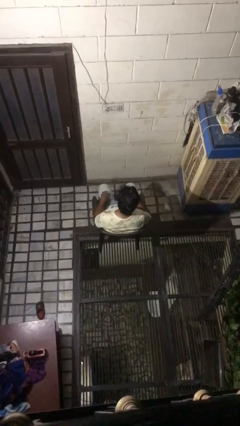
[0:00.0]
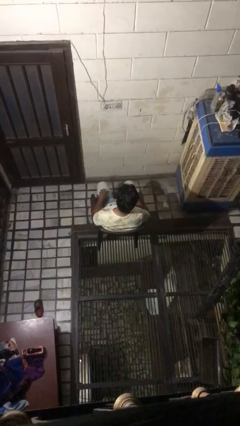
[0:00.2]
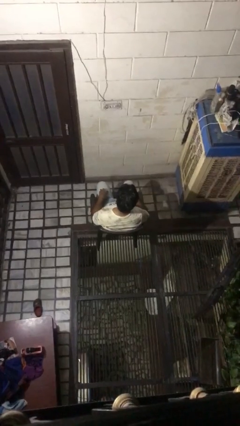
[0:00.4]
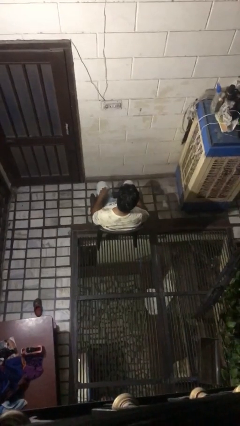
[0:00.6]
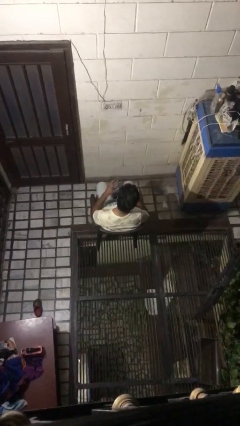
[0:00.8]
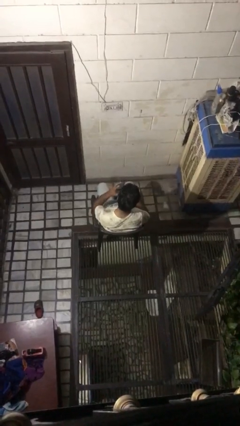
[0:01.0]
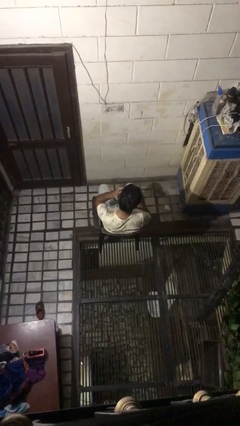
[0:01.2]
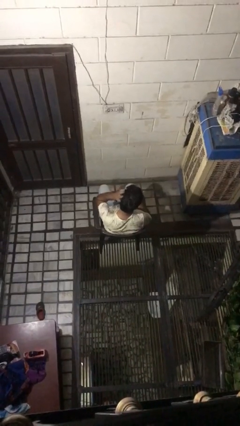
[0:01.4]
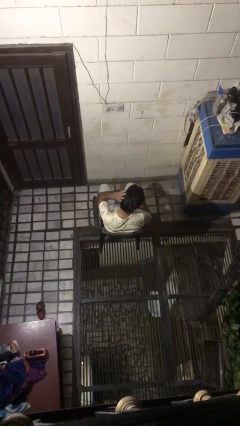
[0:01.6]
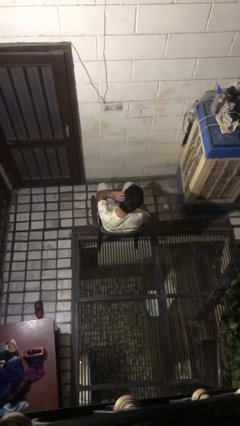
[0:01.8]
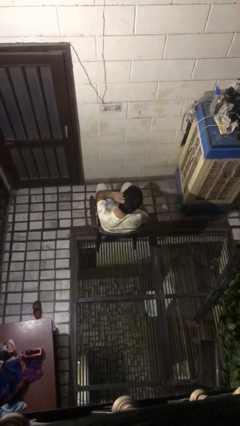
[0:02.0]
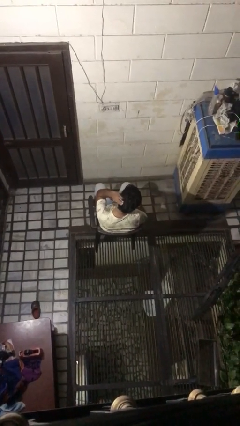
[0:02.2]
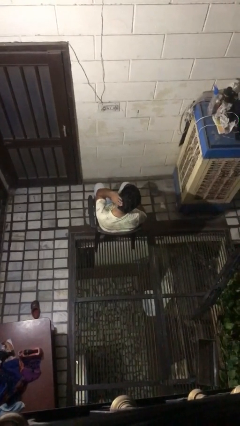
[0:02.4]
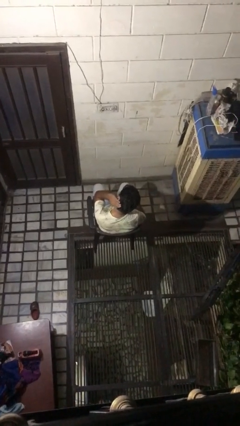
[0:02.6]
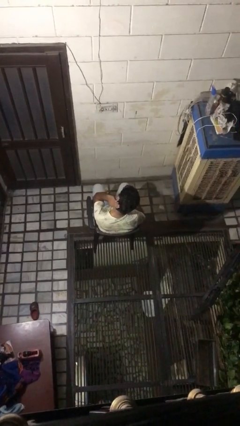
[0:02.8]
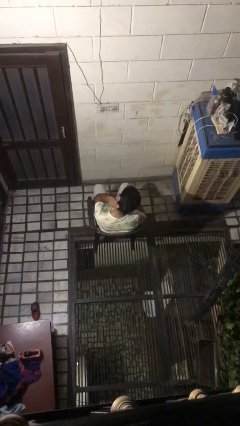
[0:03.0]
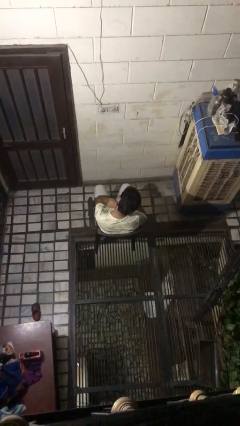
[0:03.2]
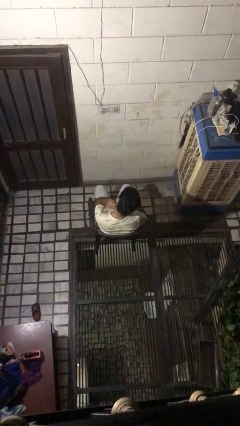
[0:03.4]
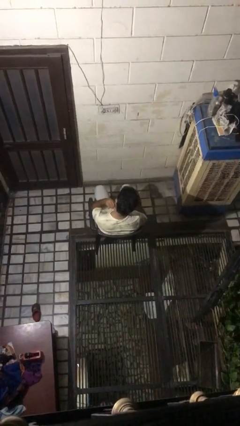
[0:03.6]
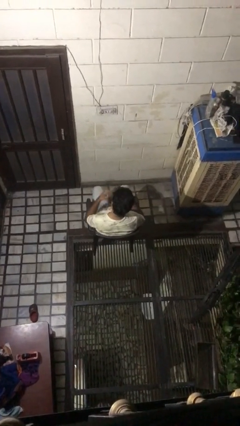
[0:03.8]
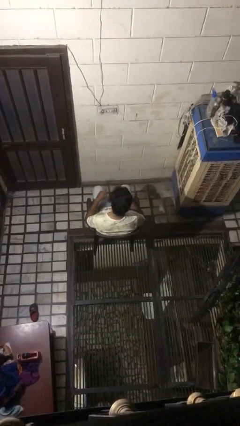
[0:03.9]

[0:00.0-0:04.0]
person strokes hair

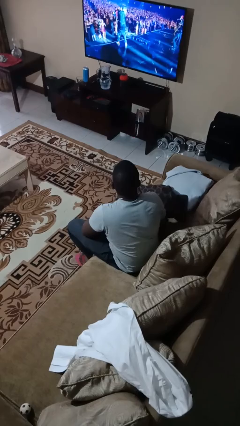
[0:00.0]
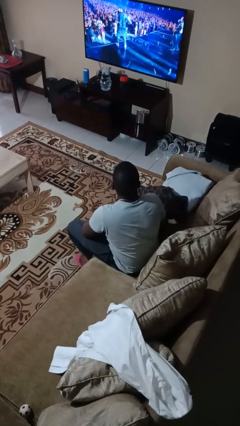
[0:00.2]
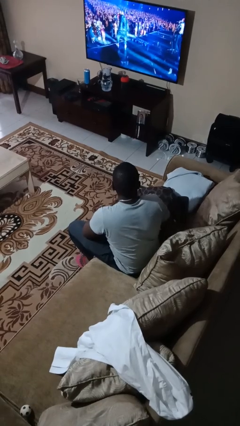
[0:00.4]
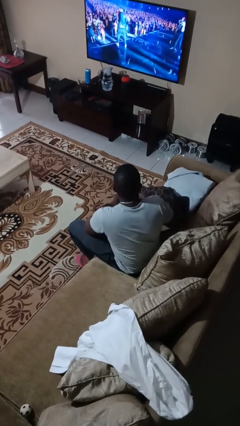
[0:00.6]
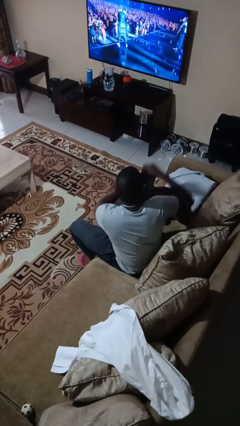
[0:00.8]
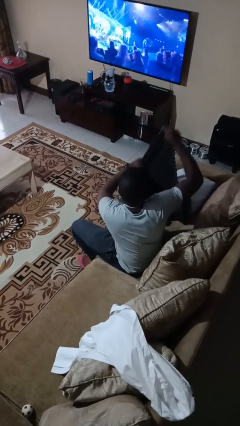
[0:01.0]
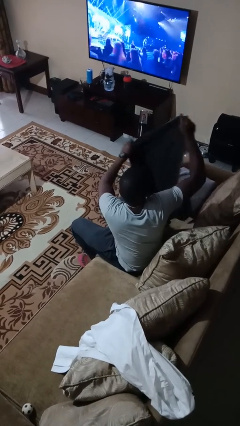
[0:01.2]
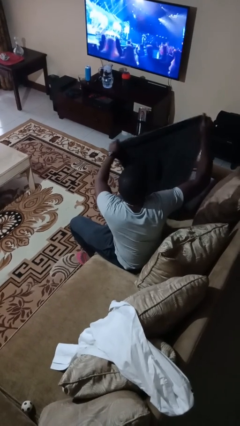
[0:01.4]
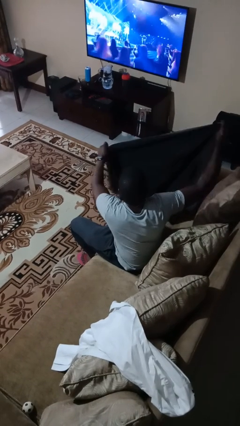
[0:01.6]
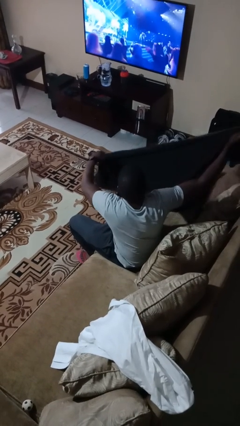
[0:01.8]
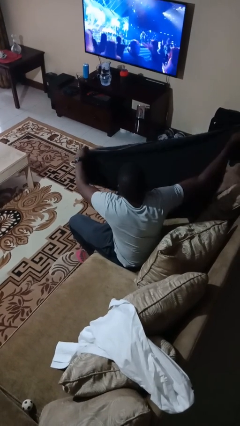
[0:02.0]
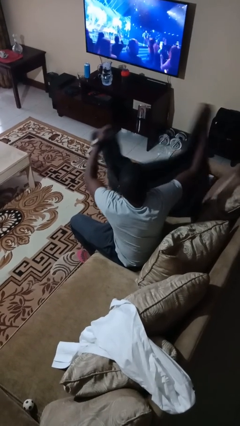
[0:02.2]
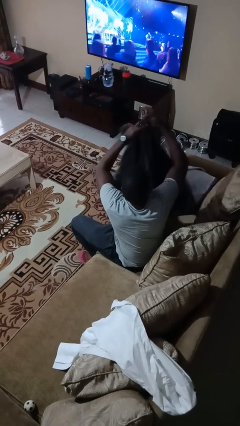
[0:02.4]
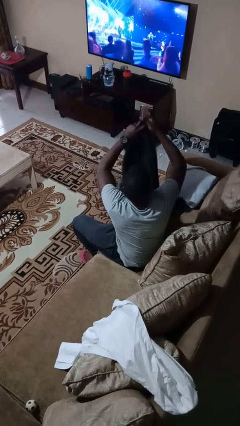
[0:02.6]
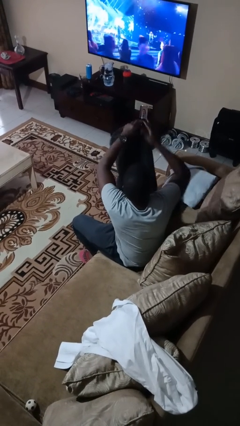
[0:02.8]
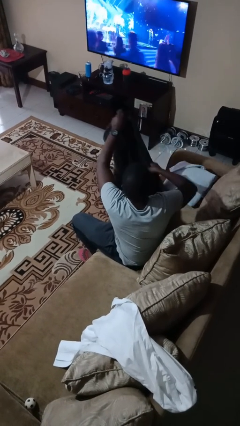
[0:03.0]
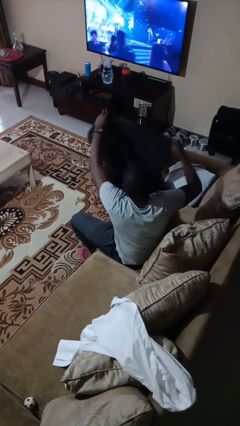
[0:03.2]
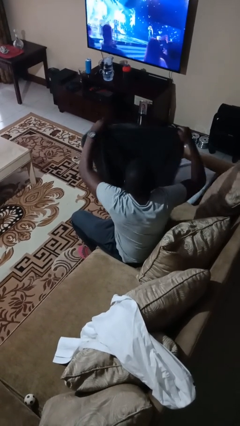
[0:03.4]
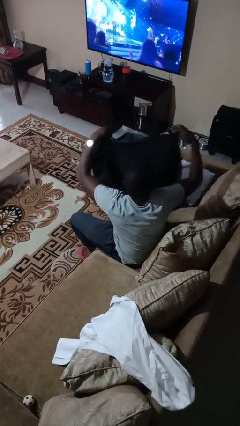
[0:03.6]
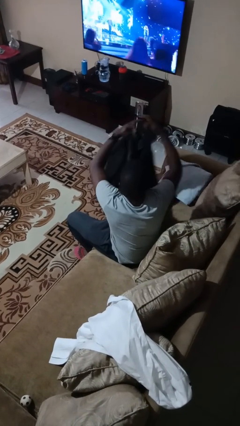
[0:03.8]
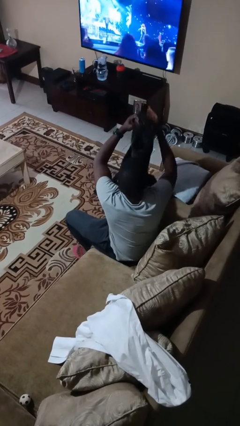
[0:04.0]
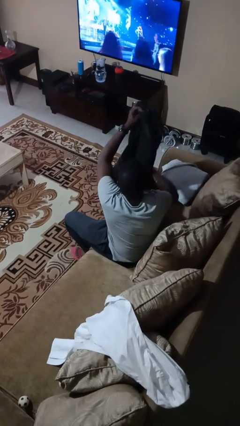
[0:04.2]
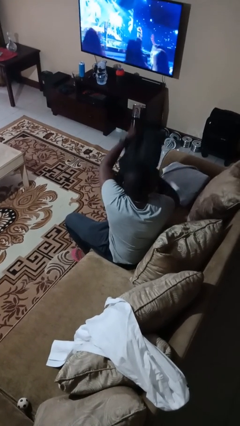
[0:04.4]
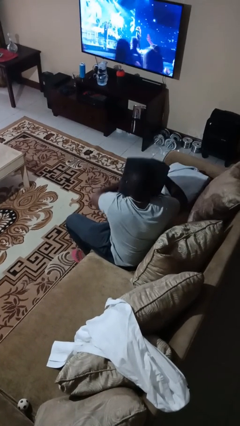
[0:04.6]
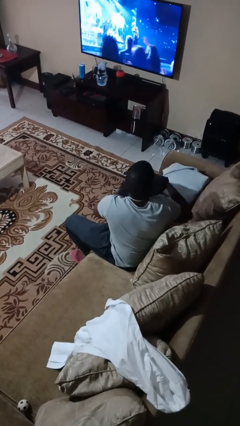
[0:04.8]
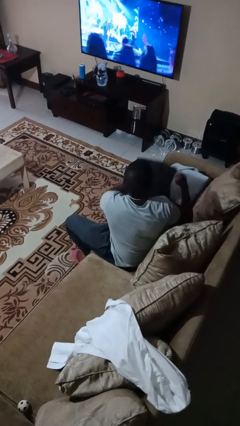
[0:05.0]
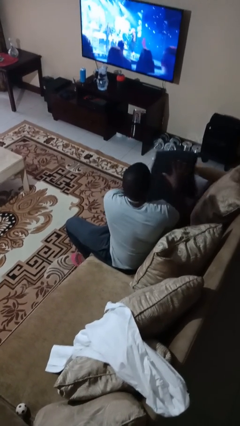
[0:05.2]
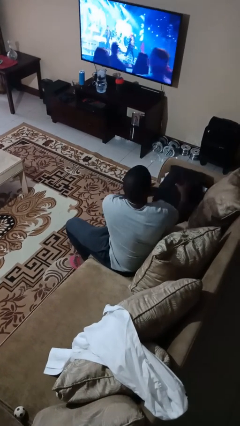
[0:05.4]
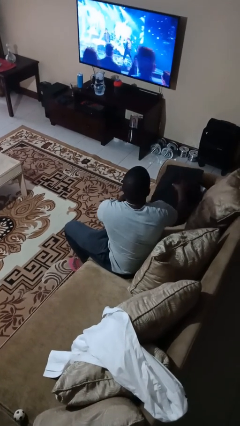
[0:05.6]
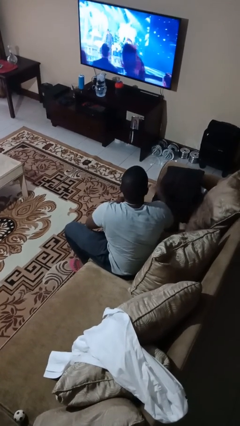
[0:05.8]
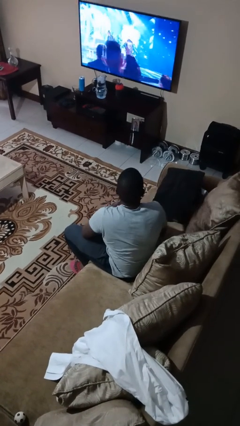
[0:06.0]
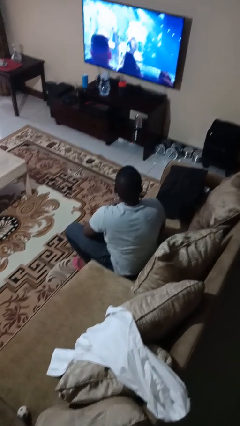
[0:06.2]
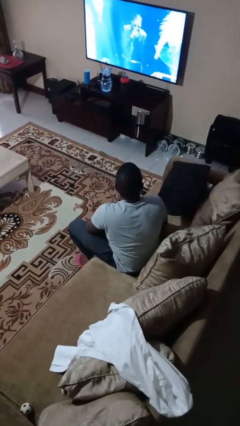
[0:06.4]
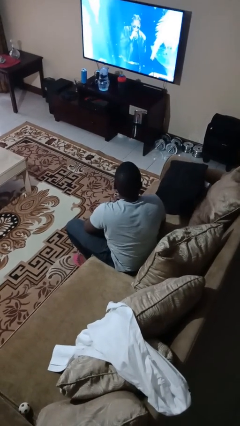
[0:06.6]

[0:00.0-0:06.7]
person folds towel

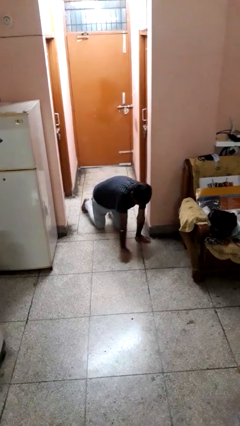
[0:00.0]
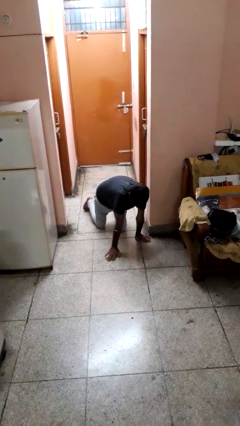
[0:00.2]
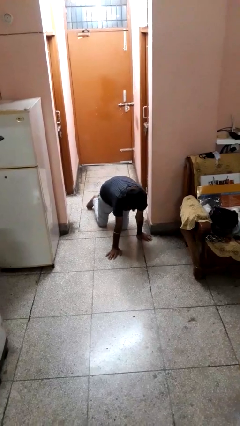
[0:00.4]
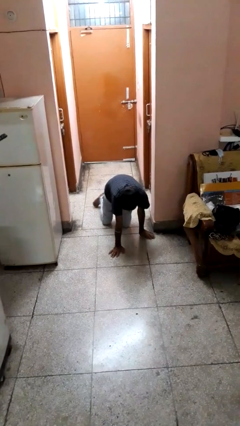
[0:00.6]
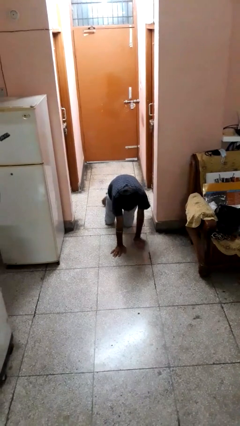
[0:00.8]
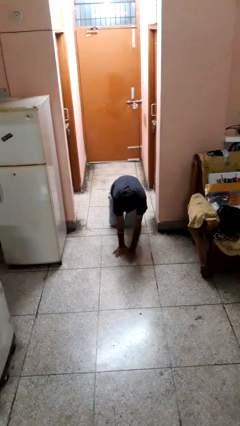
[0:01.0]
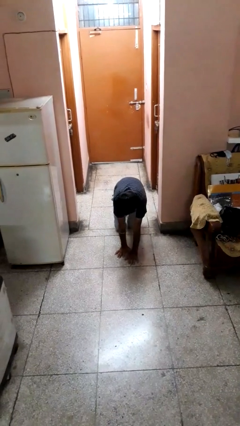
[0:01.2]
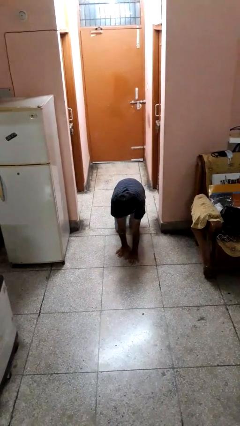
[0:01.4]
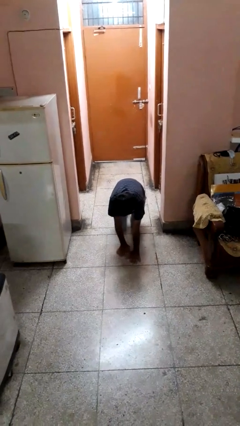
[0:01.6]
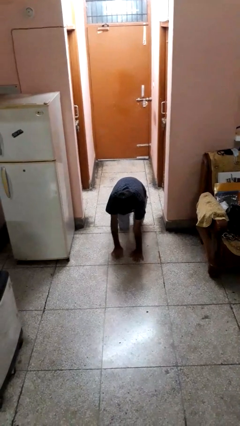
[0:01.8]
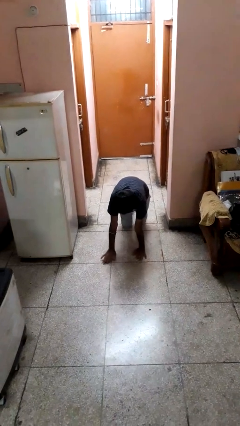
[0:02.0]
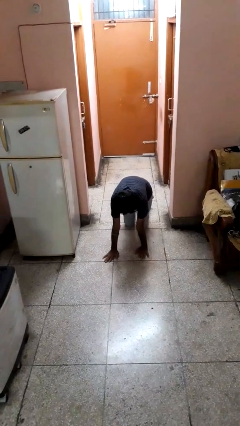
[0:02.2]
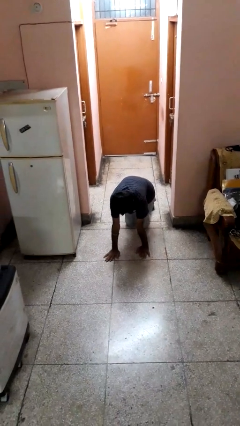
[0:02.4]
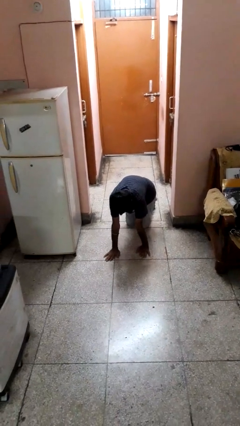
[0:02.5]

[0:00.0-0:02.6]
person crawls

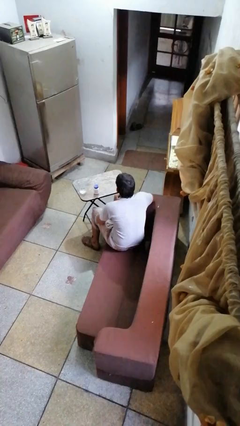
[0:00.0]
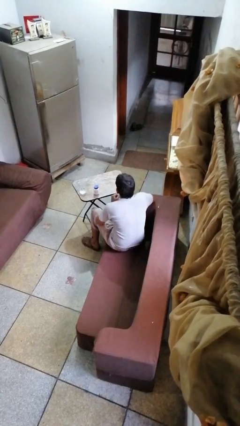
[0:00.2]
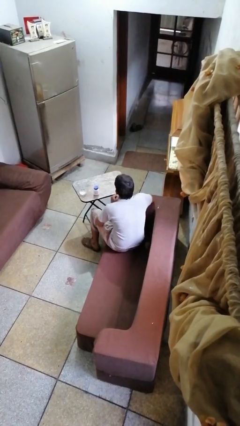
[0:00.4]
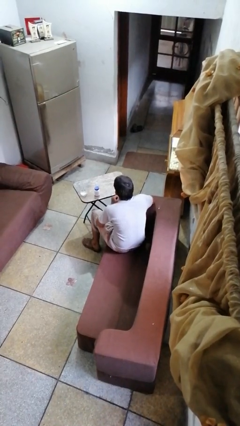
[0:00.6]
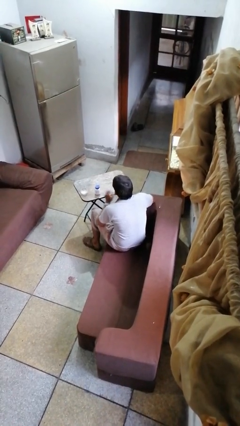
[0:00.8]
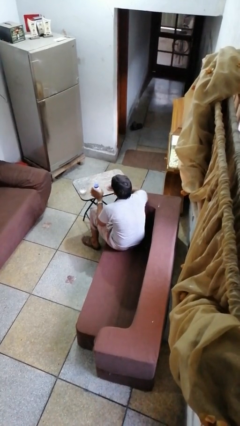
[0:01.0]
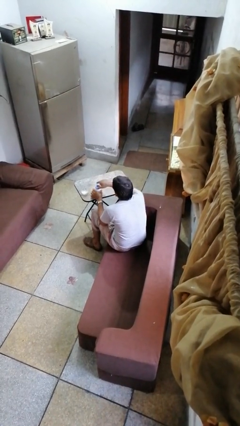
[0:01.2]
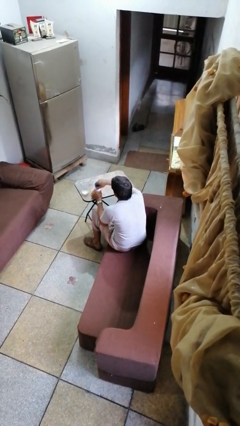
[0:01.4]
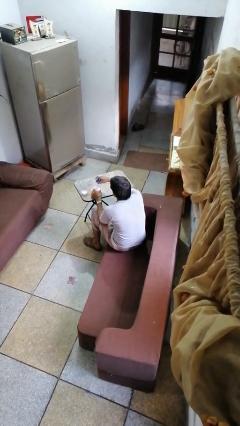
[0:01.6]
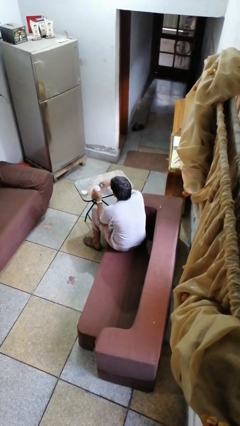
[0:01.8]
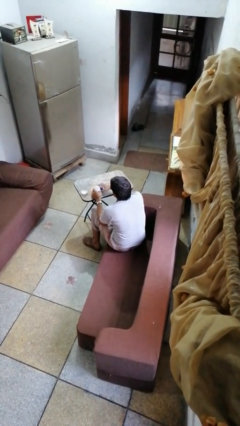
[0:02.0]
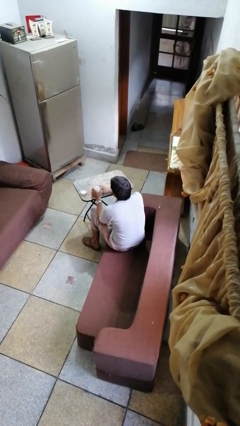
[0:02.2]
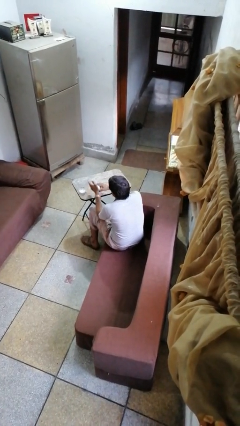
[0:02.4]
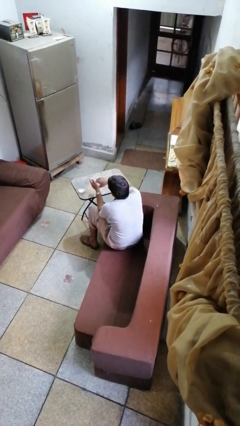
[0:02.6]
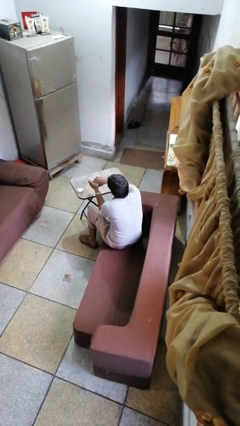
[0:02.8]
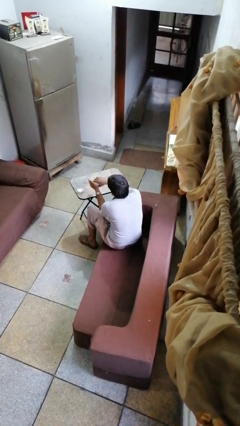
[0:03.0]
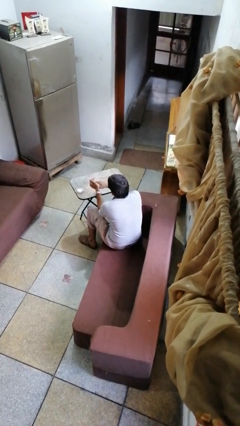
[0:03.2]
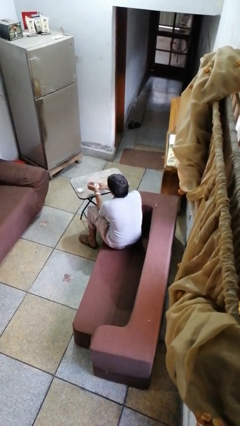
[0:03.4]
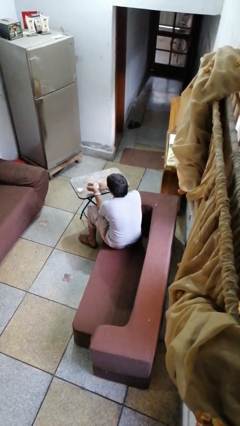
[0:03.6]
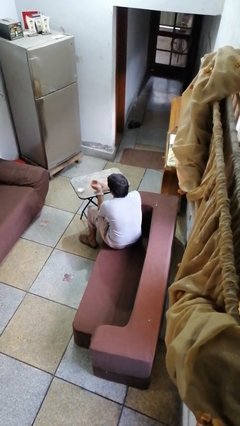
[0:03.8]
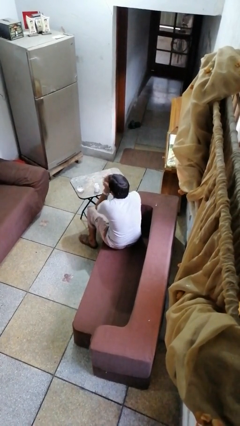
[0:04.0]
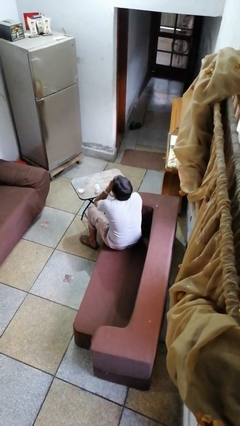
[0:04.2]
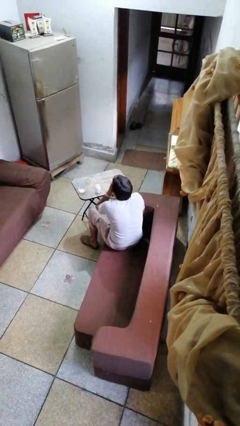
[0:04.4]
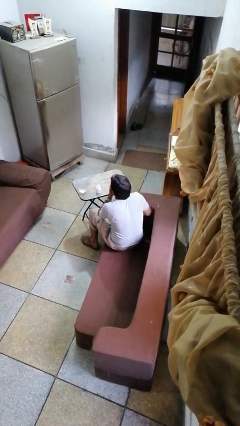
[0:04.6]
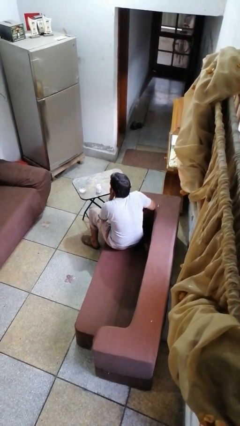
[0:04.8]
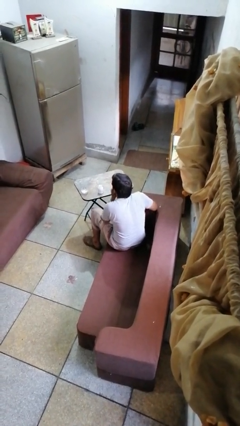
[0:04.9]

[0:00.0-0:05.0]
person takes medicine pills
